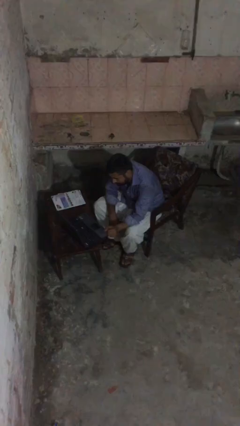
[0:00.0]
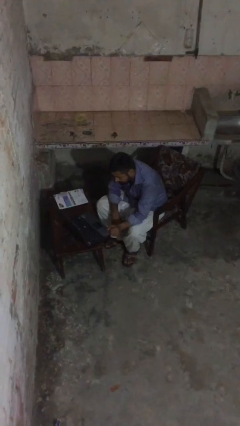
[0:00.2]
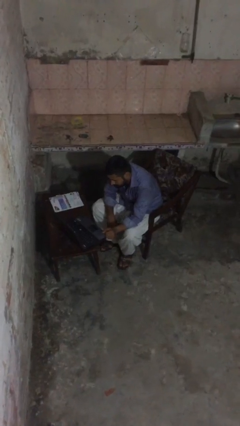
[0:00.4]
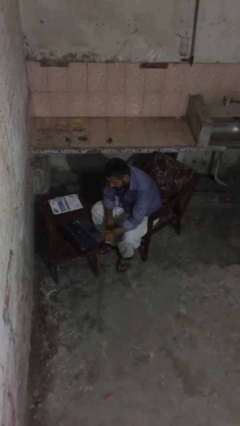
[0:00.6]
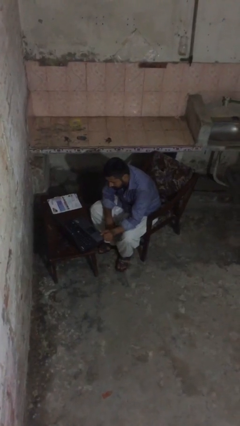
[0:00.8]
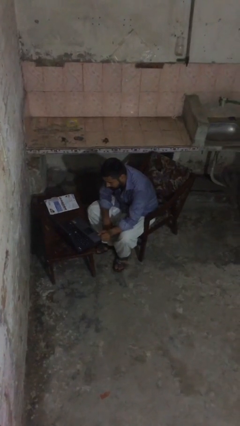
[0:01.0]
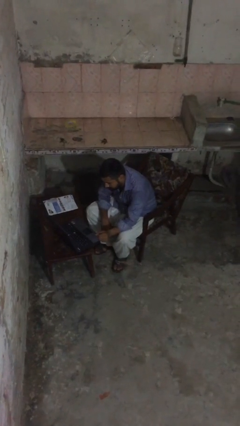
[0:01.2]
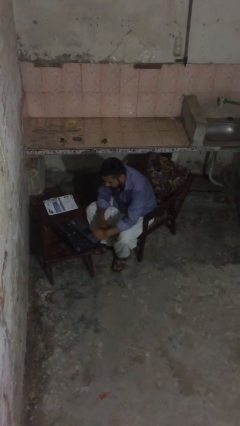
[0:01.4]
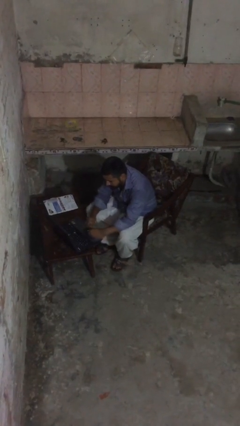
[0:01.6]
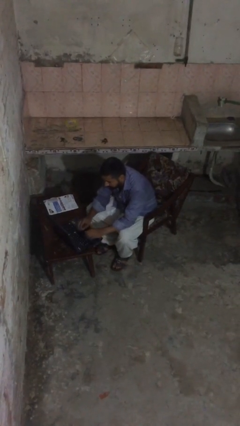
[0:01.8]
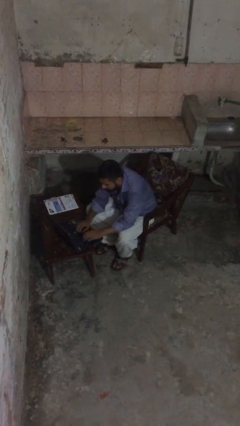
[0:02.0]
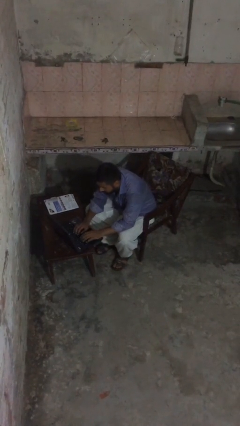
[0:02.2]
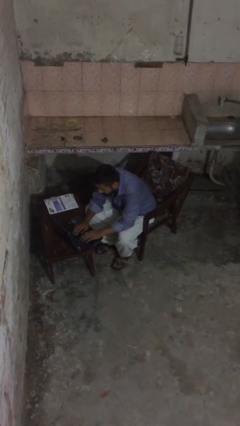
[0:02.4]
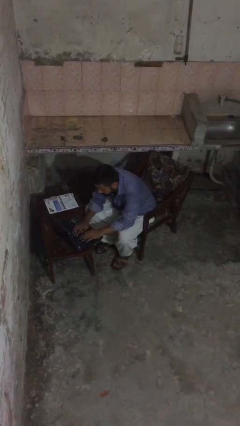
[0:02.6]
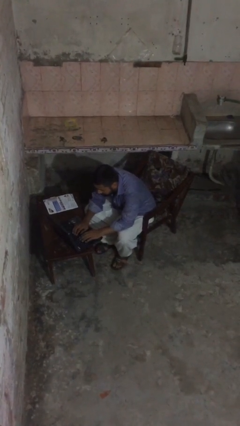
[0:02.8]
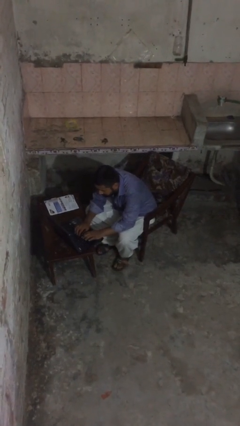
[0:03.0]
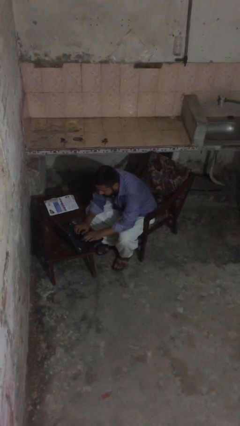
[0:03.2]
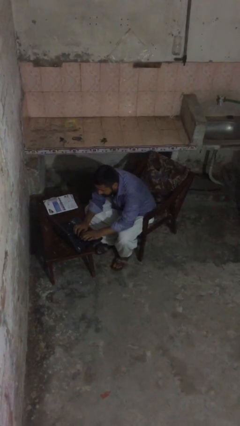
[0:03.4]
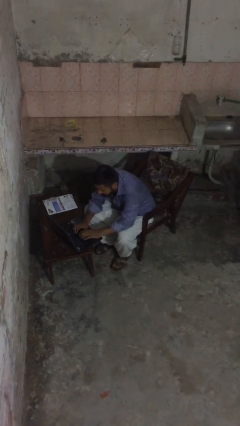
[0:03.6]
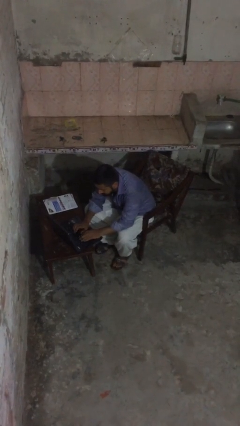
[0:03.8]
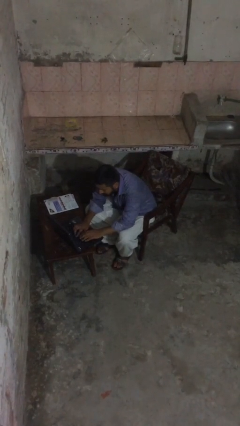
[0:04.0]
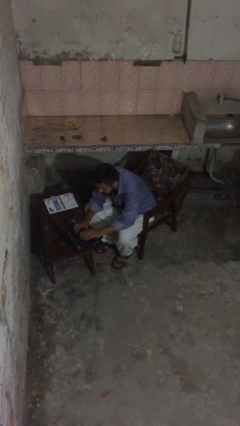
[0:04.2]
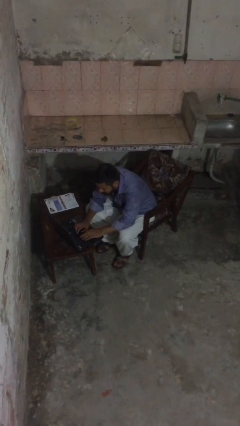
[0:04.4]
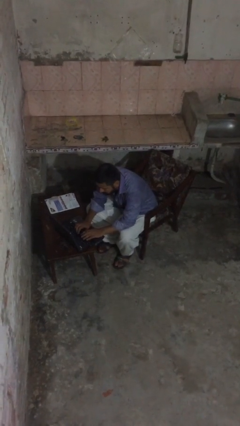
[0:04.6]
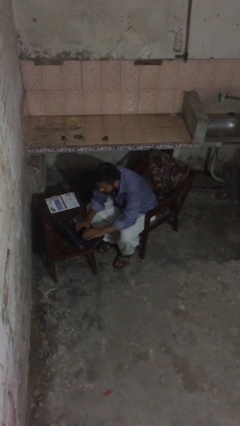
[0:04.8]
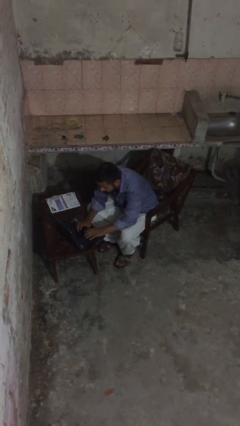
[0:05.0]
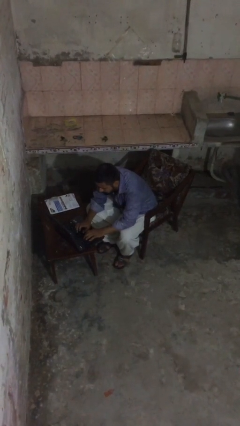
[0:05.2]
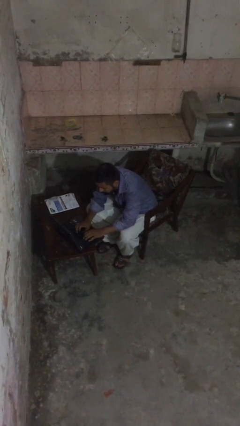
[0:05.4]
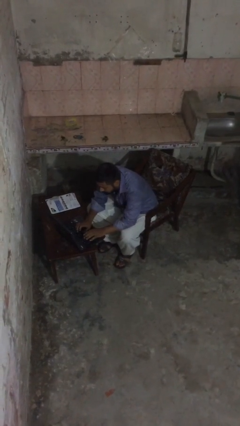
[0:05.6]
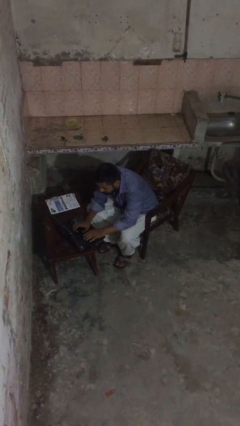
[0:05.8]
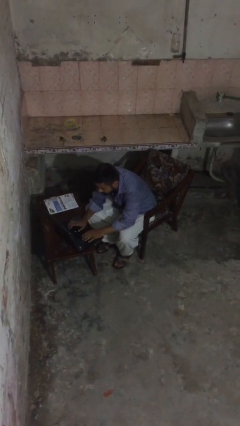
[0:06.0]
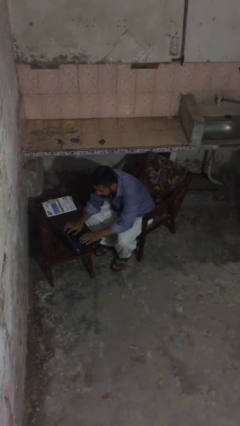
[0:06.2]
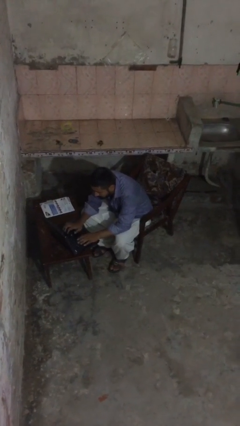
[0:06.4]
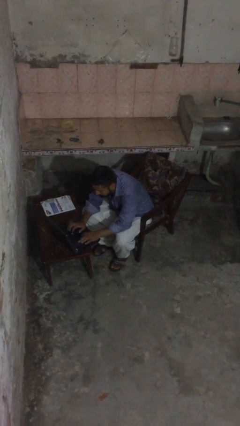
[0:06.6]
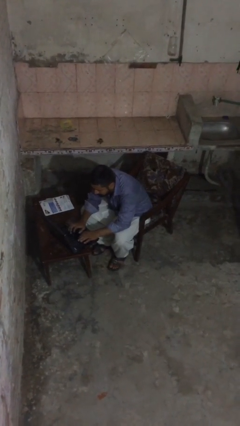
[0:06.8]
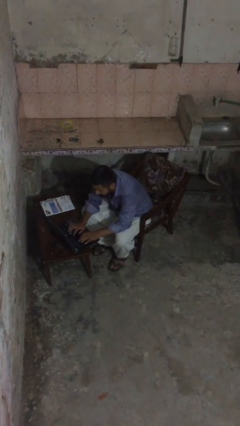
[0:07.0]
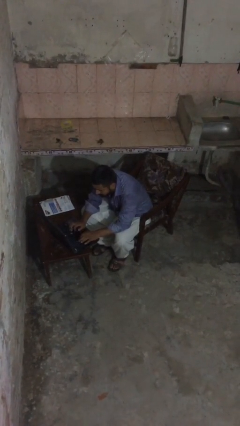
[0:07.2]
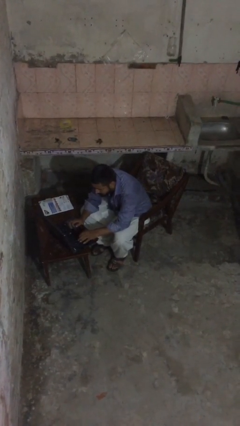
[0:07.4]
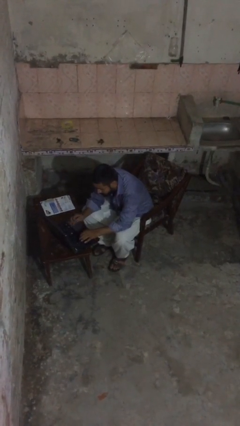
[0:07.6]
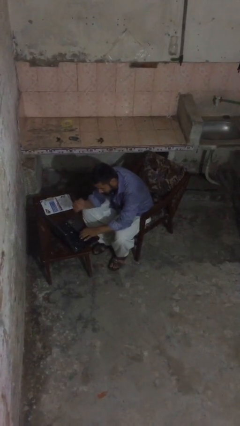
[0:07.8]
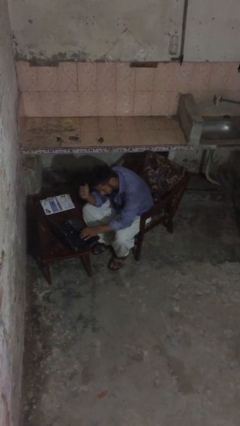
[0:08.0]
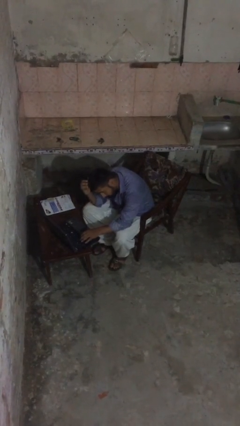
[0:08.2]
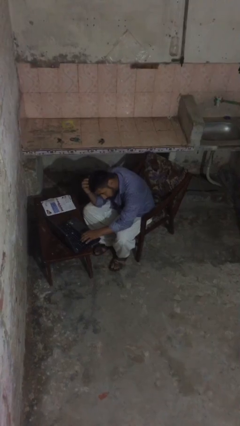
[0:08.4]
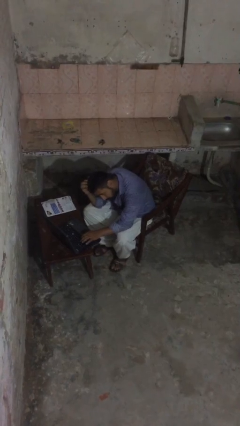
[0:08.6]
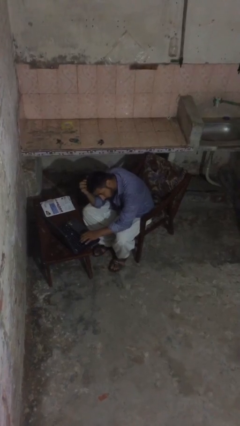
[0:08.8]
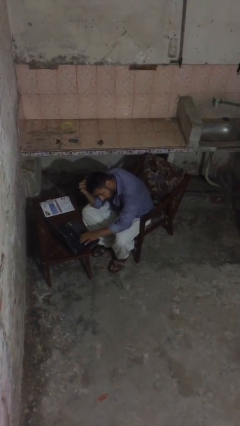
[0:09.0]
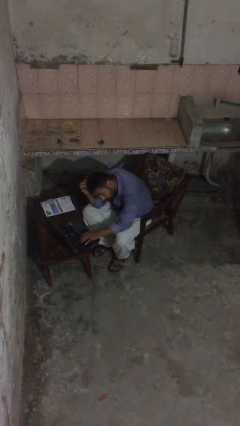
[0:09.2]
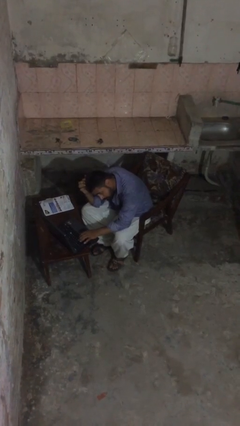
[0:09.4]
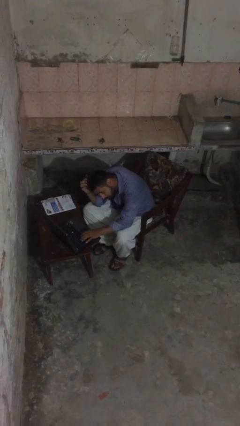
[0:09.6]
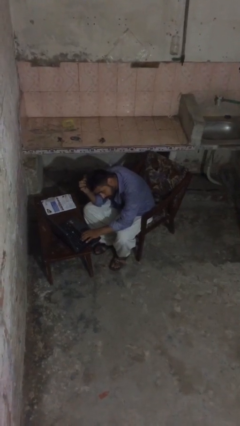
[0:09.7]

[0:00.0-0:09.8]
person interacts with laptop

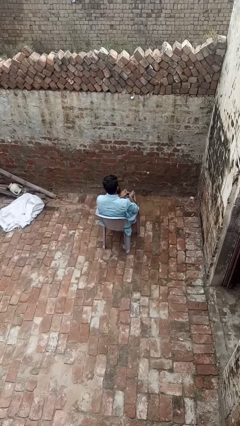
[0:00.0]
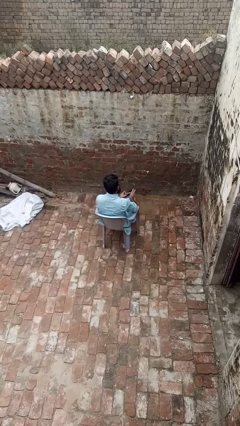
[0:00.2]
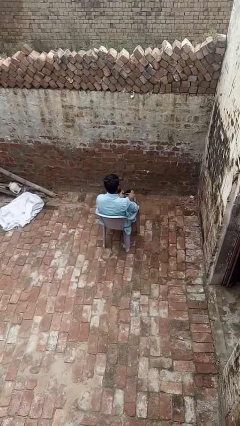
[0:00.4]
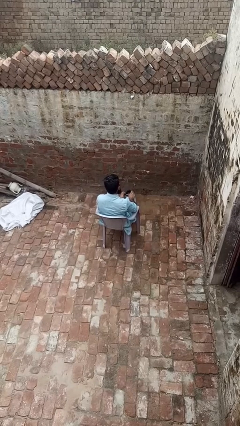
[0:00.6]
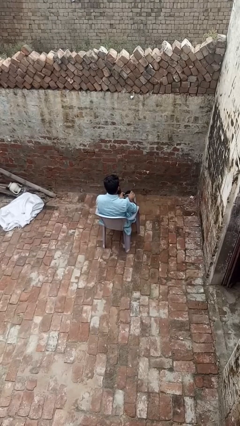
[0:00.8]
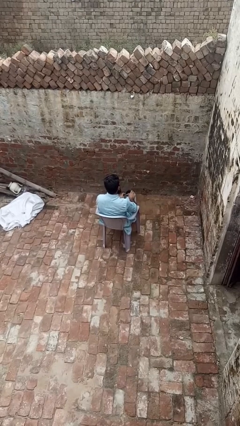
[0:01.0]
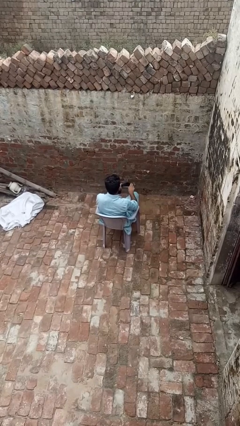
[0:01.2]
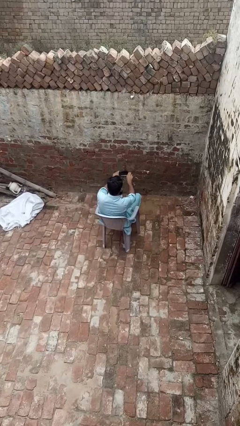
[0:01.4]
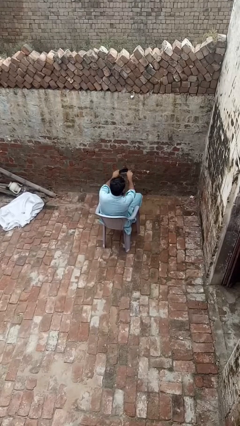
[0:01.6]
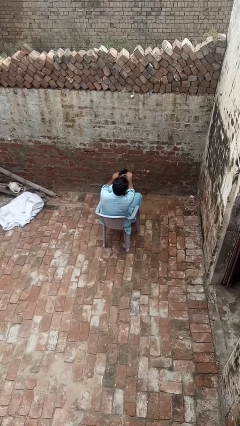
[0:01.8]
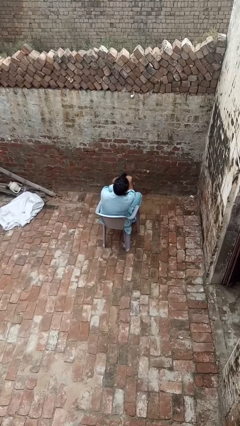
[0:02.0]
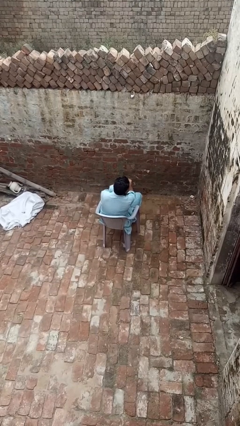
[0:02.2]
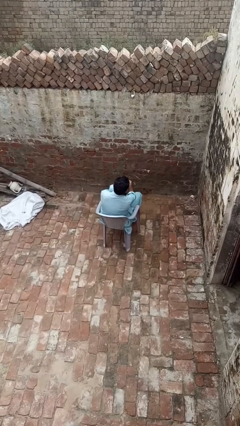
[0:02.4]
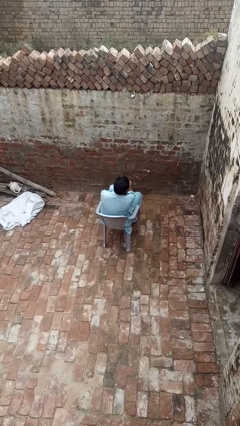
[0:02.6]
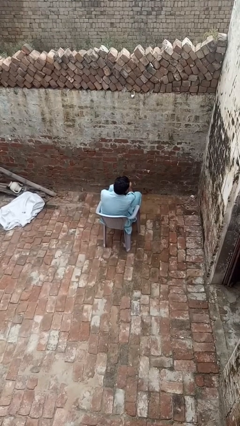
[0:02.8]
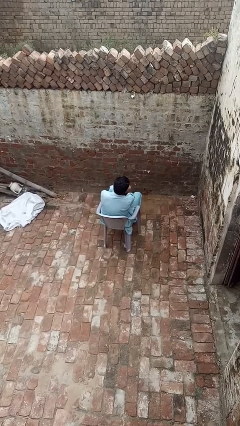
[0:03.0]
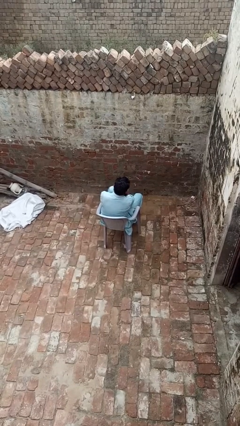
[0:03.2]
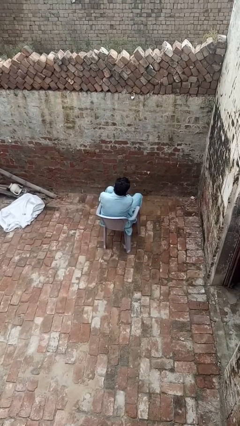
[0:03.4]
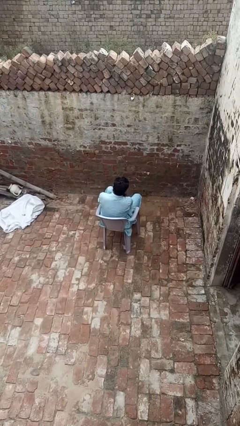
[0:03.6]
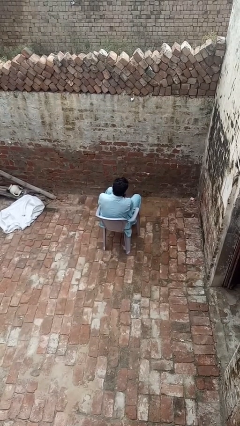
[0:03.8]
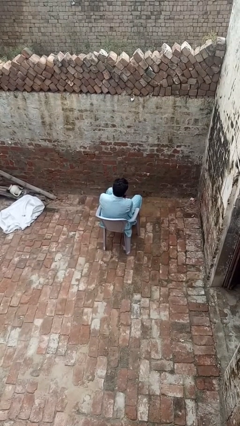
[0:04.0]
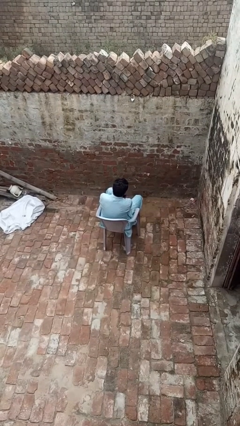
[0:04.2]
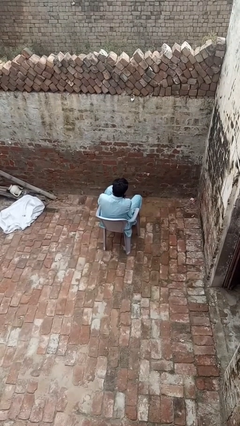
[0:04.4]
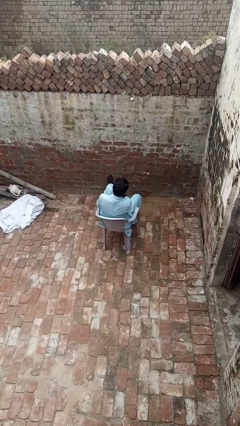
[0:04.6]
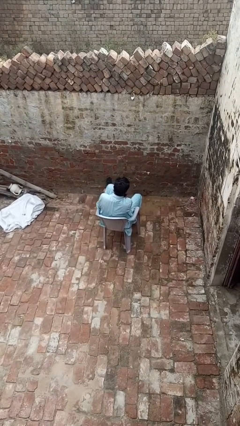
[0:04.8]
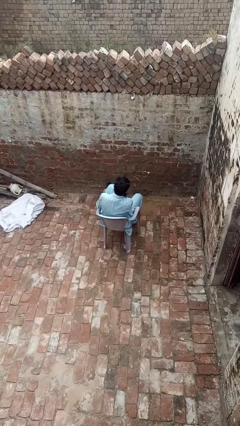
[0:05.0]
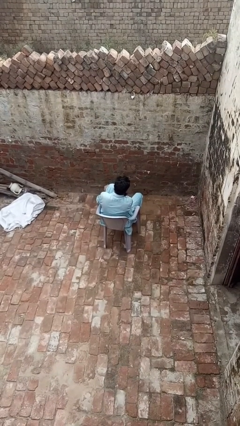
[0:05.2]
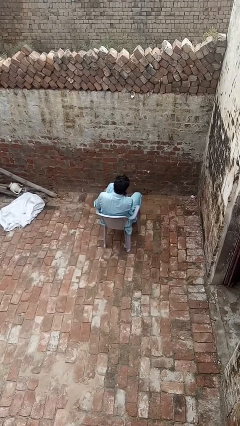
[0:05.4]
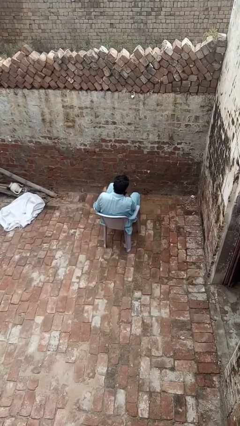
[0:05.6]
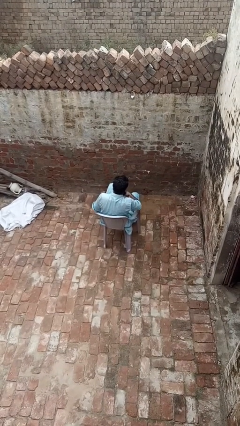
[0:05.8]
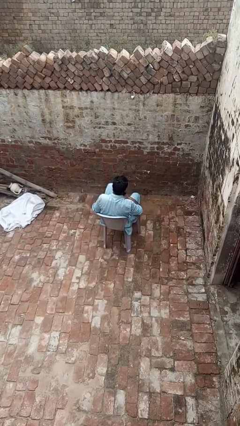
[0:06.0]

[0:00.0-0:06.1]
person puts on socks

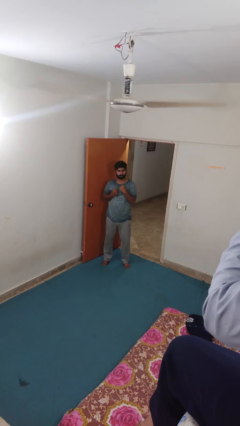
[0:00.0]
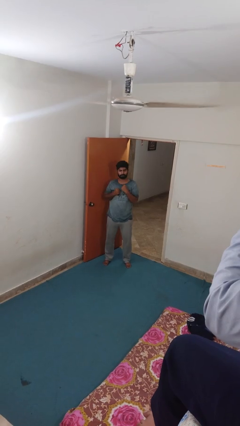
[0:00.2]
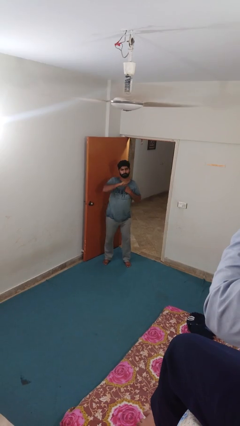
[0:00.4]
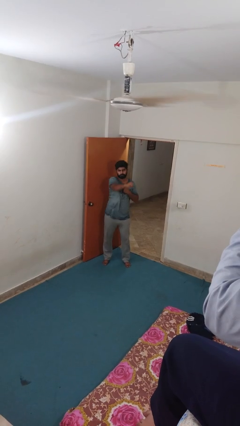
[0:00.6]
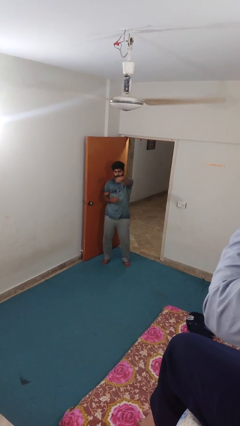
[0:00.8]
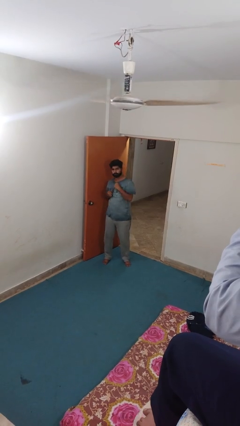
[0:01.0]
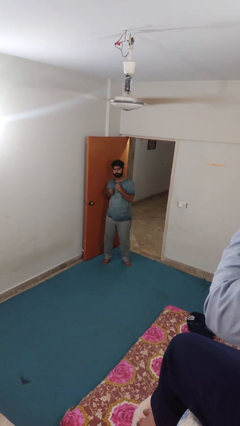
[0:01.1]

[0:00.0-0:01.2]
person punches

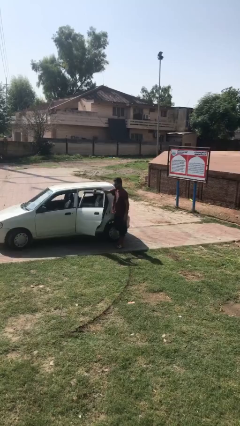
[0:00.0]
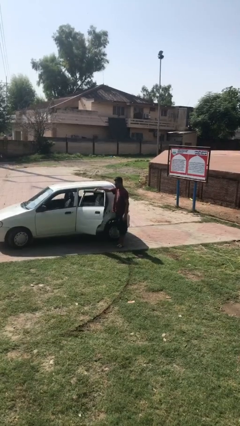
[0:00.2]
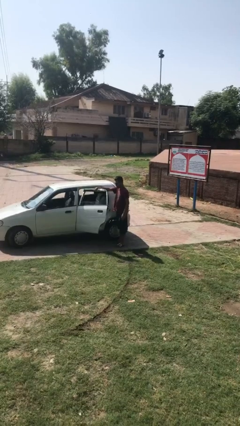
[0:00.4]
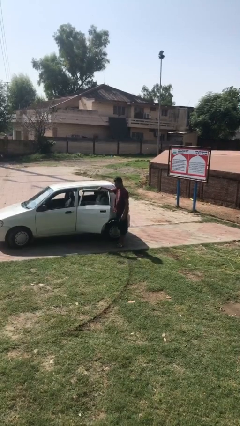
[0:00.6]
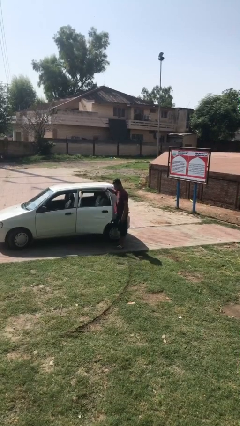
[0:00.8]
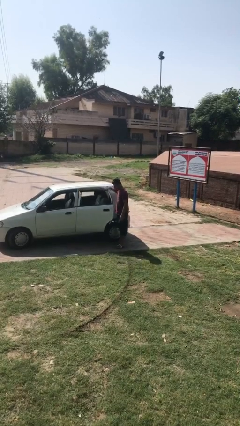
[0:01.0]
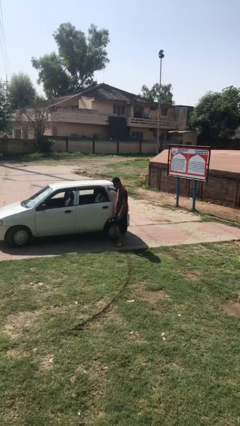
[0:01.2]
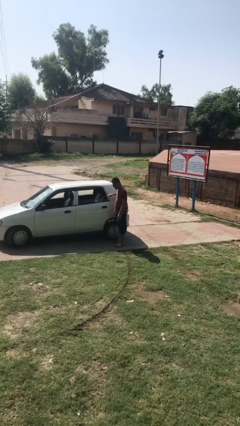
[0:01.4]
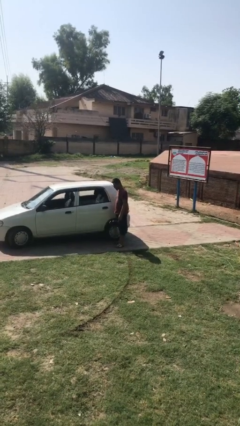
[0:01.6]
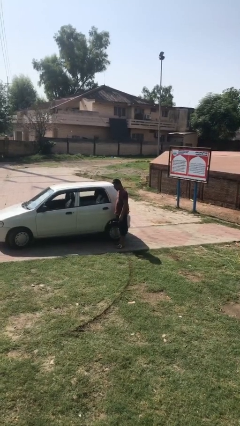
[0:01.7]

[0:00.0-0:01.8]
person closes car door
